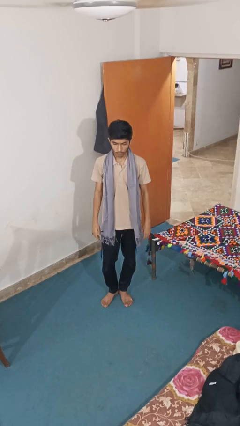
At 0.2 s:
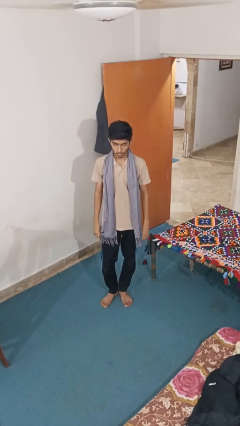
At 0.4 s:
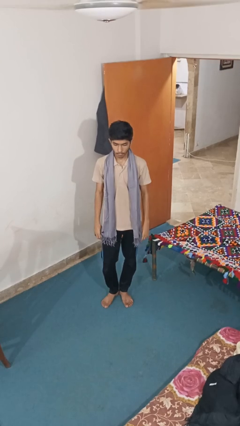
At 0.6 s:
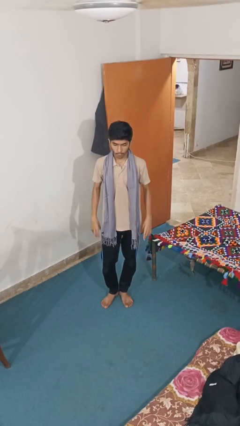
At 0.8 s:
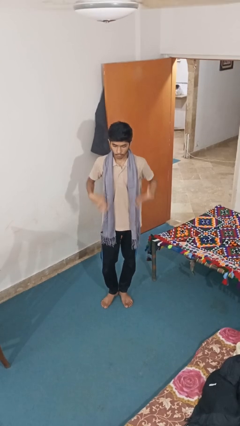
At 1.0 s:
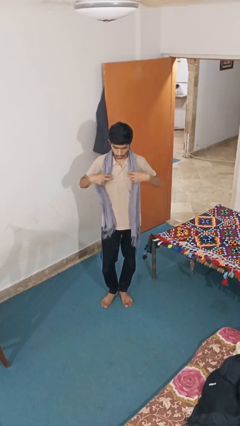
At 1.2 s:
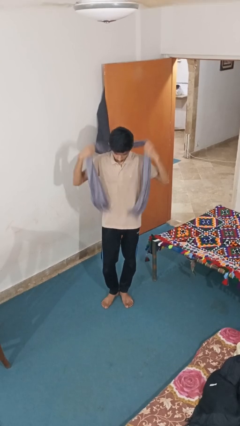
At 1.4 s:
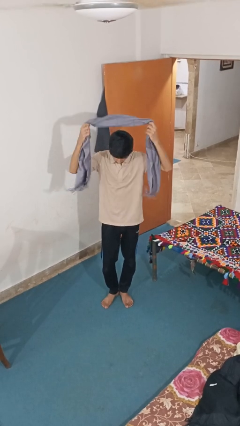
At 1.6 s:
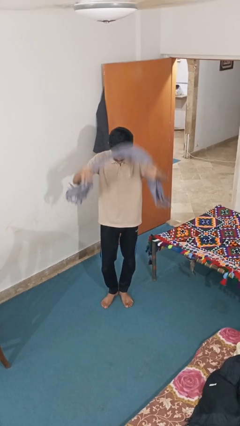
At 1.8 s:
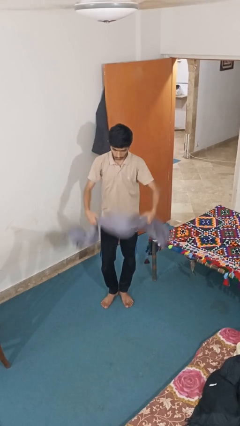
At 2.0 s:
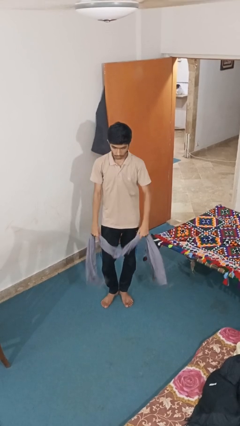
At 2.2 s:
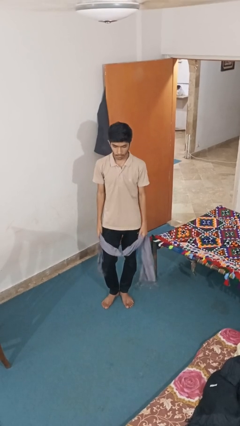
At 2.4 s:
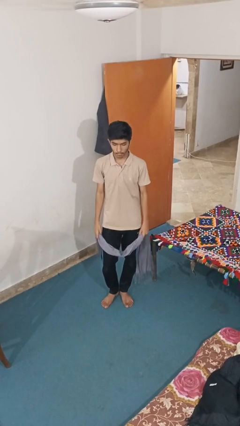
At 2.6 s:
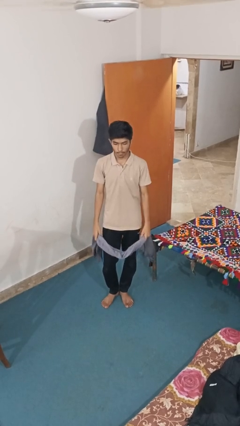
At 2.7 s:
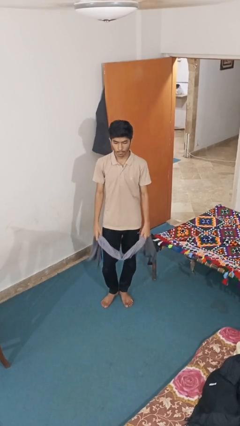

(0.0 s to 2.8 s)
person takes off scarf

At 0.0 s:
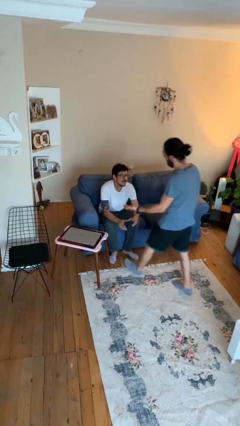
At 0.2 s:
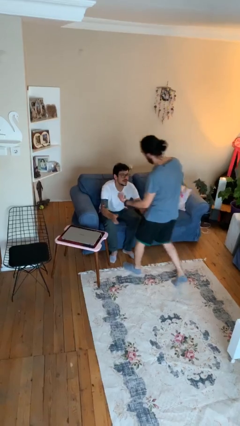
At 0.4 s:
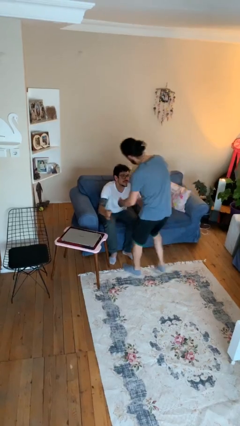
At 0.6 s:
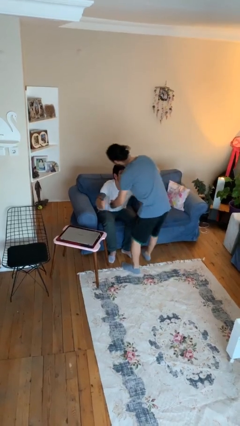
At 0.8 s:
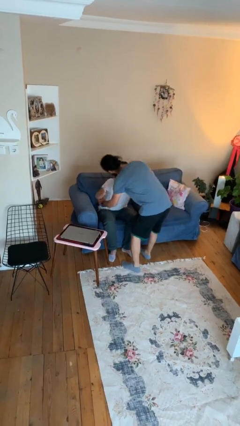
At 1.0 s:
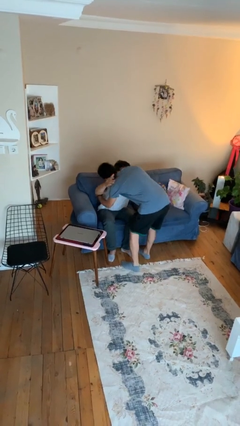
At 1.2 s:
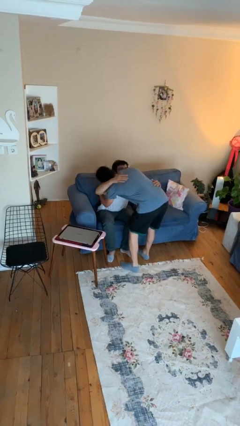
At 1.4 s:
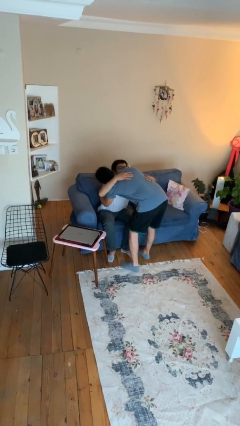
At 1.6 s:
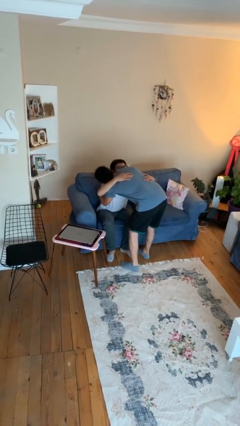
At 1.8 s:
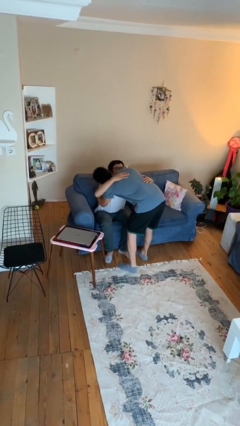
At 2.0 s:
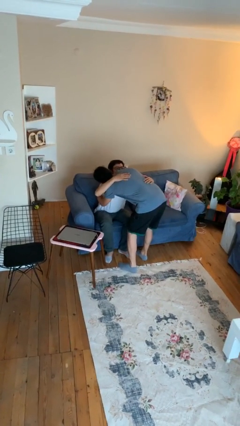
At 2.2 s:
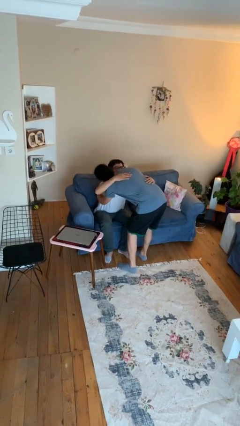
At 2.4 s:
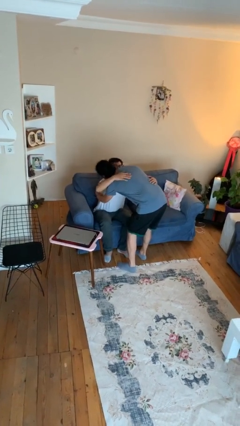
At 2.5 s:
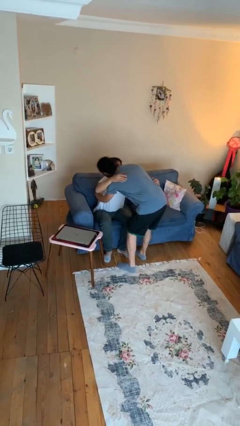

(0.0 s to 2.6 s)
person embraces person

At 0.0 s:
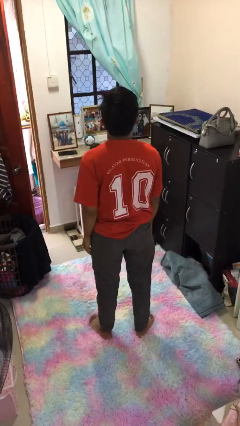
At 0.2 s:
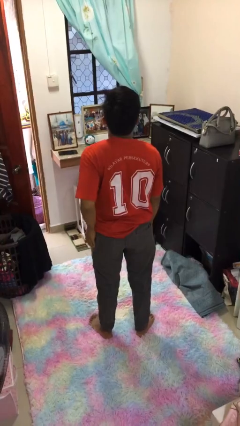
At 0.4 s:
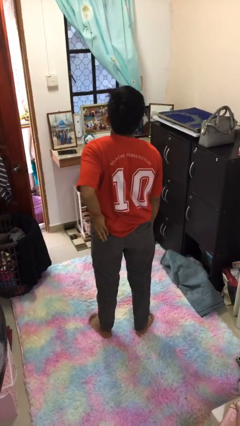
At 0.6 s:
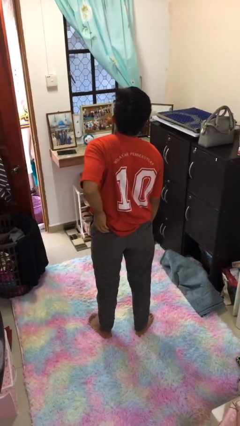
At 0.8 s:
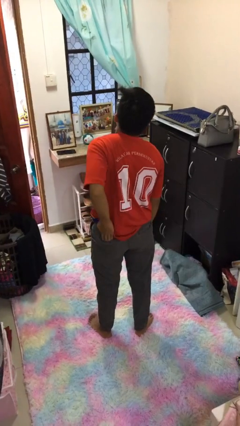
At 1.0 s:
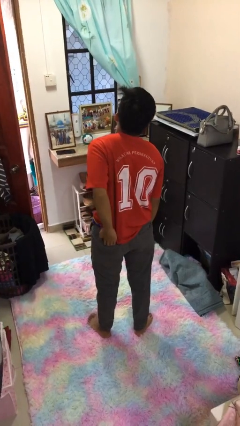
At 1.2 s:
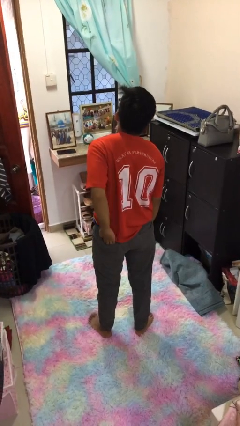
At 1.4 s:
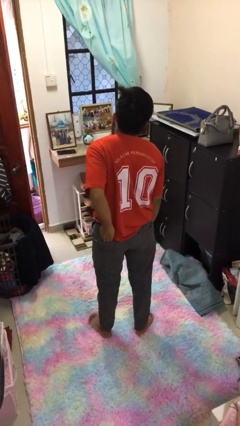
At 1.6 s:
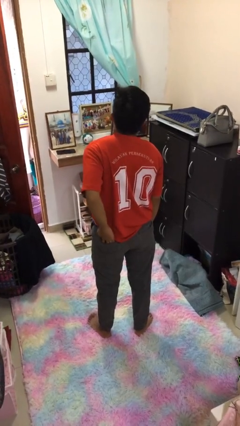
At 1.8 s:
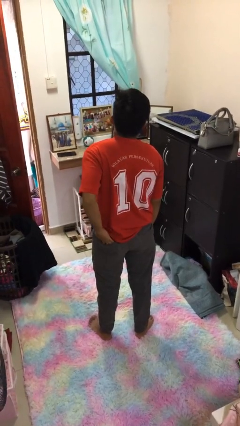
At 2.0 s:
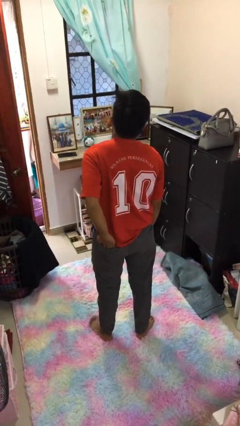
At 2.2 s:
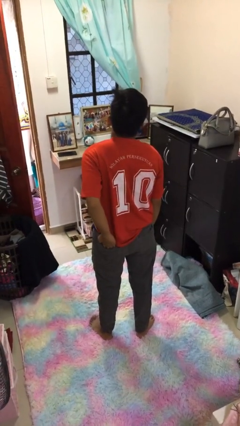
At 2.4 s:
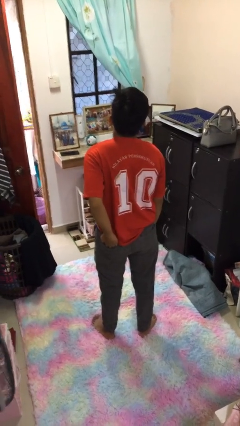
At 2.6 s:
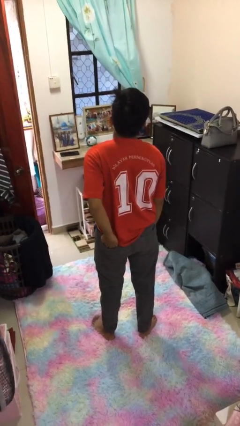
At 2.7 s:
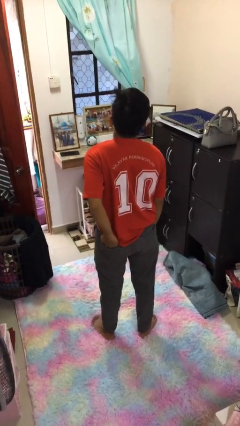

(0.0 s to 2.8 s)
person puts hands in back pockets

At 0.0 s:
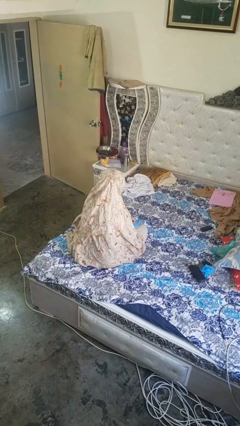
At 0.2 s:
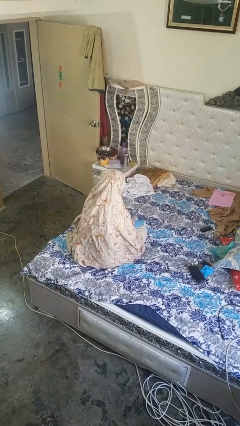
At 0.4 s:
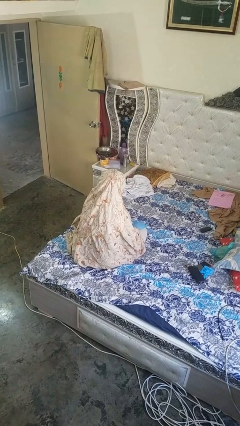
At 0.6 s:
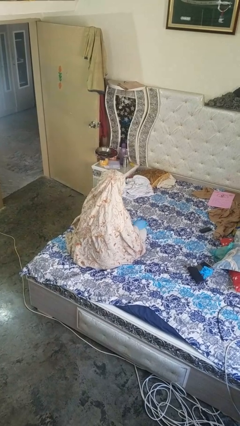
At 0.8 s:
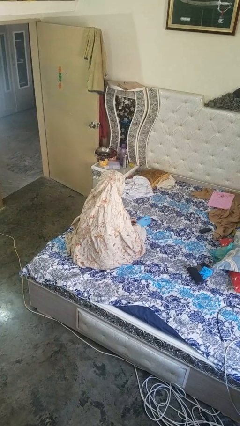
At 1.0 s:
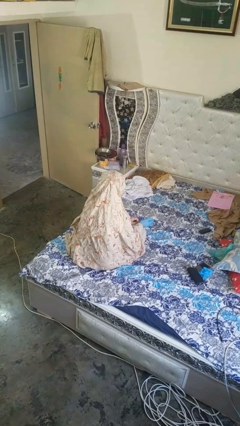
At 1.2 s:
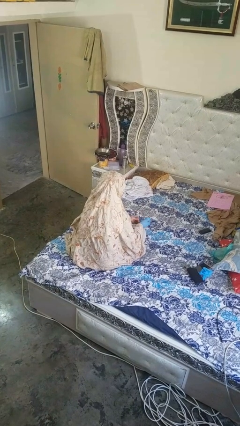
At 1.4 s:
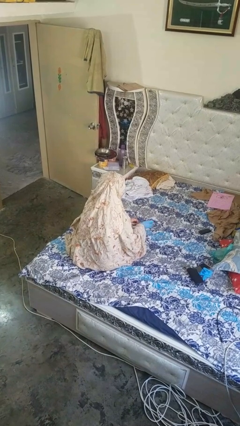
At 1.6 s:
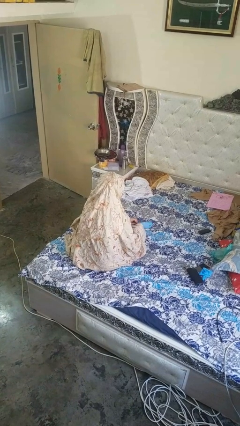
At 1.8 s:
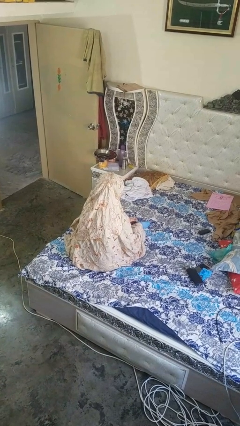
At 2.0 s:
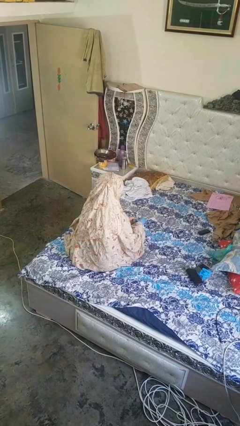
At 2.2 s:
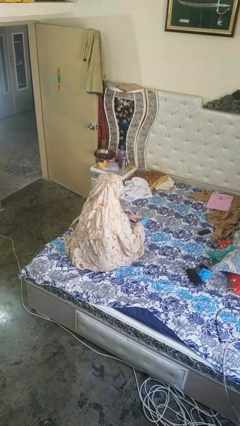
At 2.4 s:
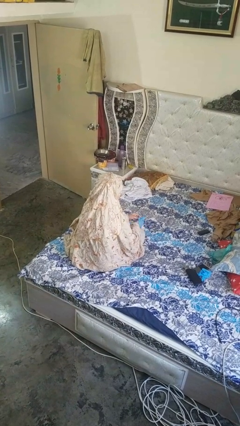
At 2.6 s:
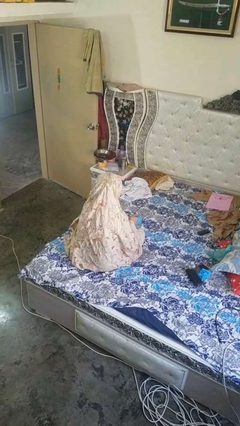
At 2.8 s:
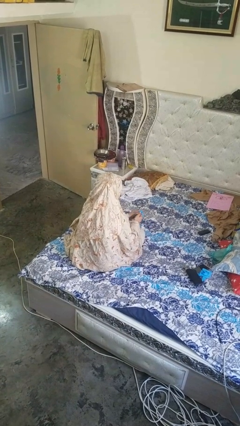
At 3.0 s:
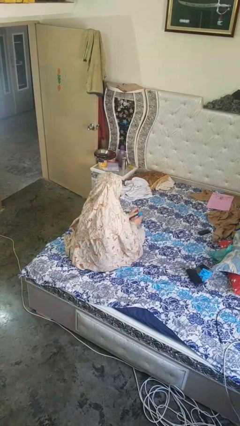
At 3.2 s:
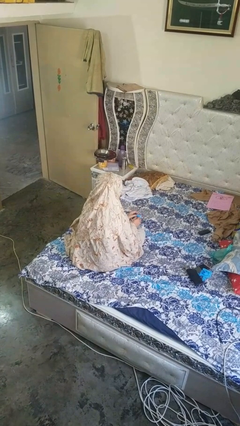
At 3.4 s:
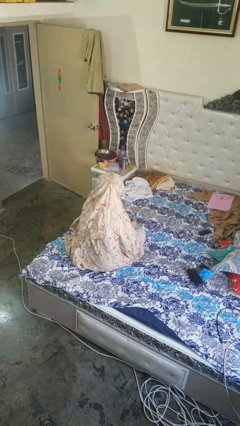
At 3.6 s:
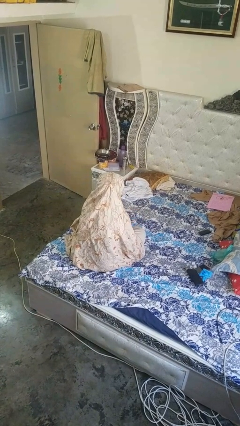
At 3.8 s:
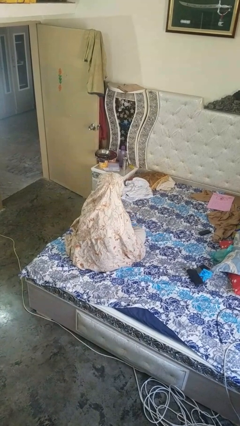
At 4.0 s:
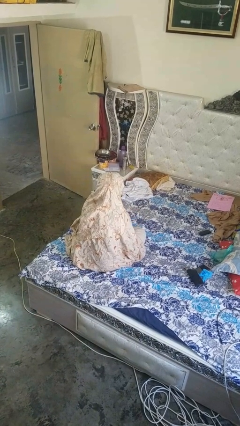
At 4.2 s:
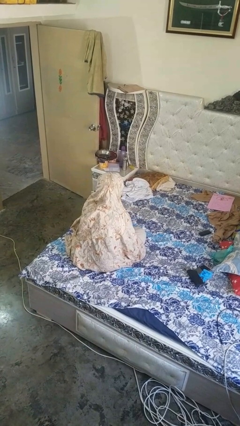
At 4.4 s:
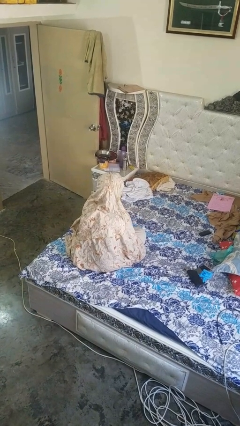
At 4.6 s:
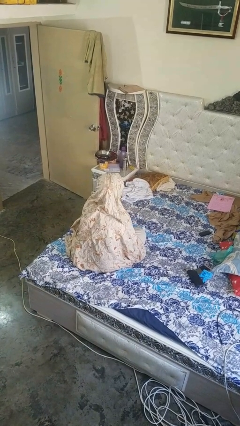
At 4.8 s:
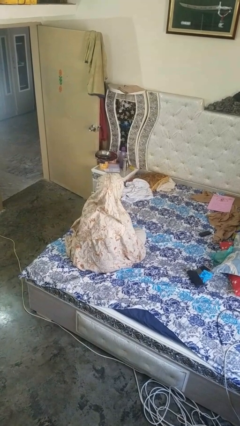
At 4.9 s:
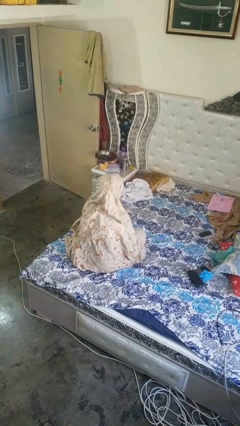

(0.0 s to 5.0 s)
person takes off gloves

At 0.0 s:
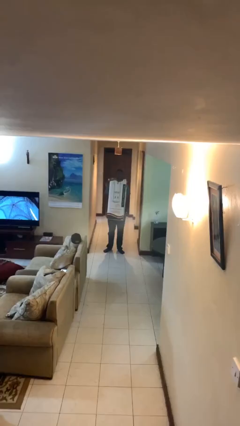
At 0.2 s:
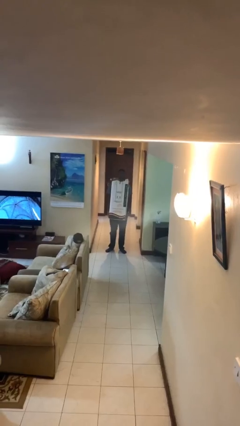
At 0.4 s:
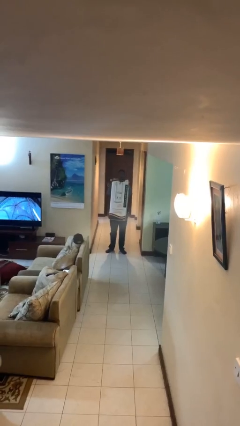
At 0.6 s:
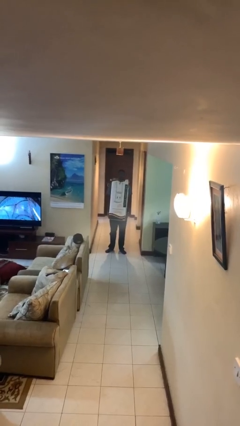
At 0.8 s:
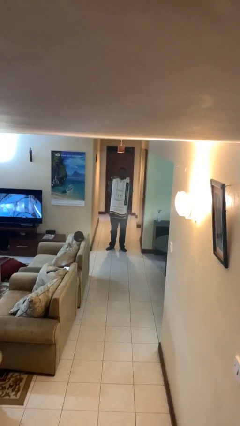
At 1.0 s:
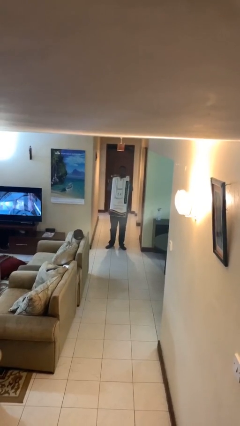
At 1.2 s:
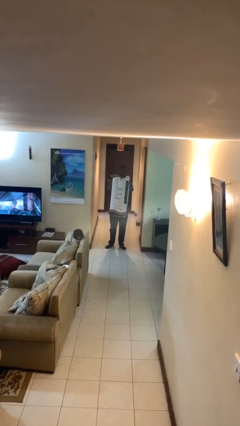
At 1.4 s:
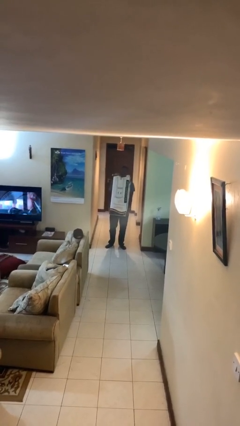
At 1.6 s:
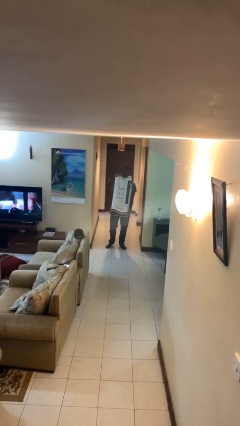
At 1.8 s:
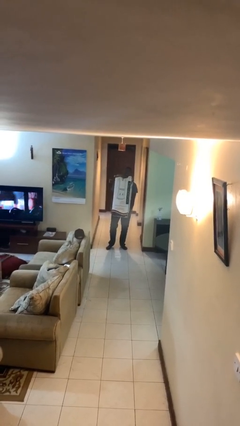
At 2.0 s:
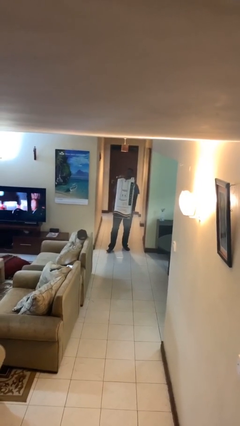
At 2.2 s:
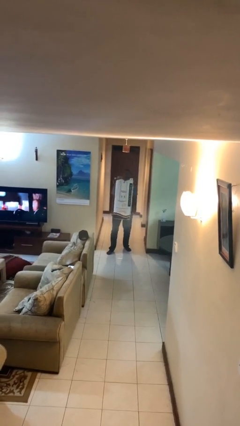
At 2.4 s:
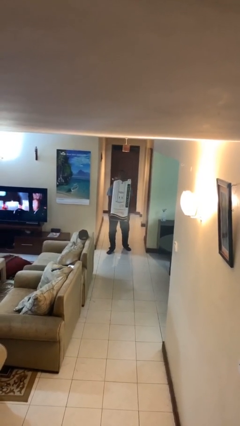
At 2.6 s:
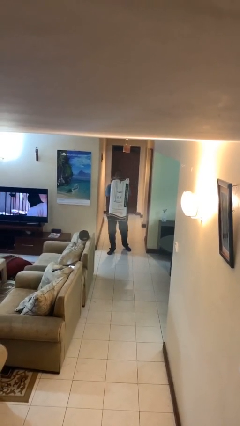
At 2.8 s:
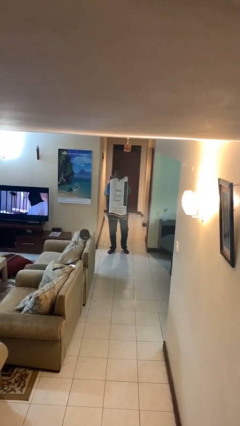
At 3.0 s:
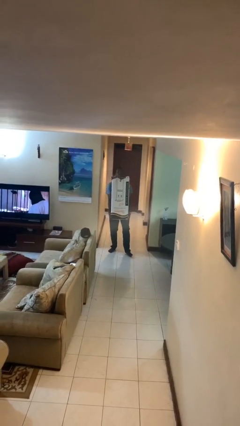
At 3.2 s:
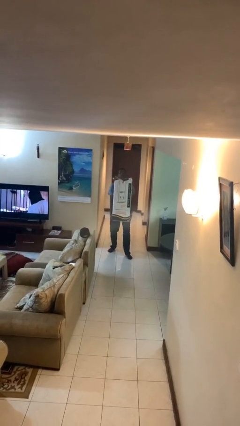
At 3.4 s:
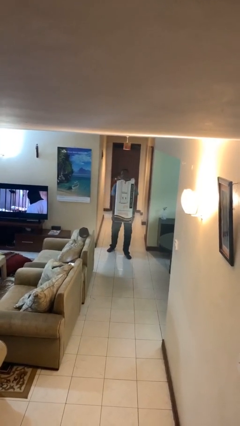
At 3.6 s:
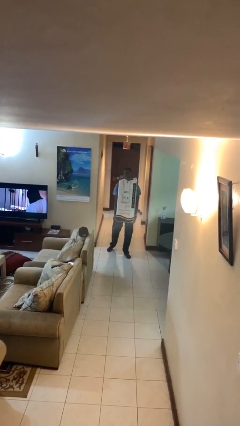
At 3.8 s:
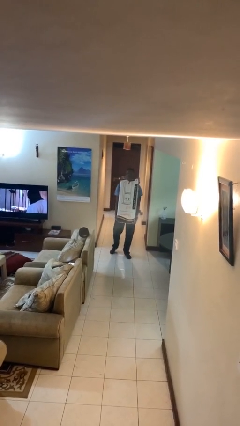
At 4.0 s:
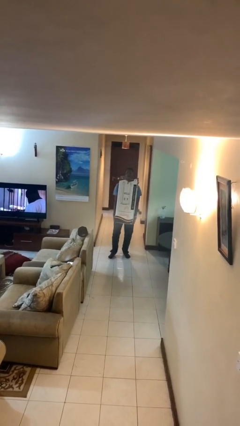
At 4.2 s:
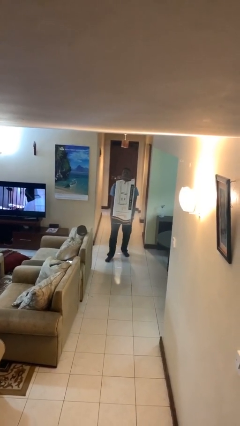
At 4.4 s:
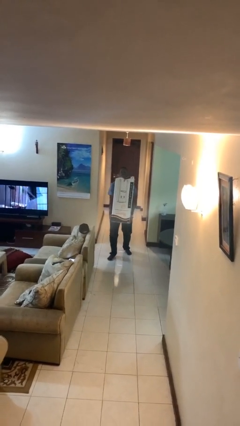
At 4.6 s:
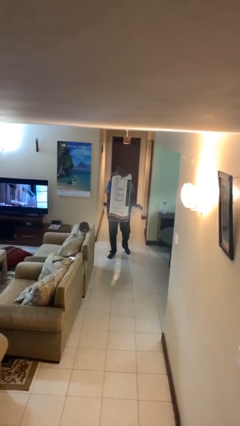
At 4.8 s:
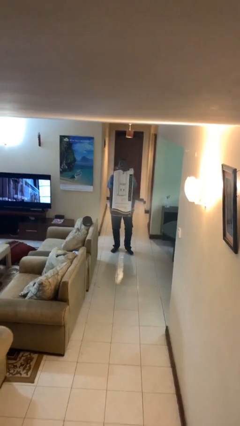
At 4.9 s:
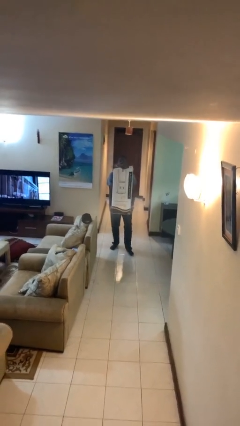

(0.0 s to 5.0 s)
person carries heavy object
